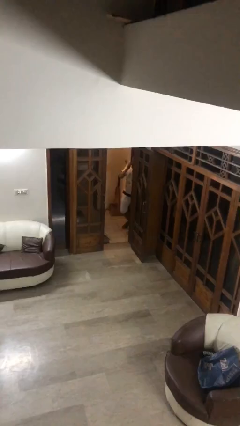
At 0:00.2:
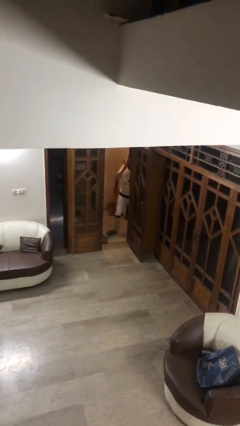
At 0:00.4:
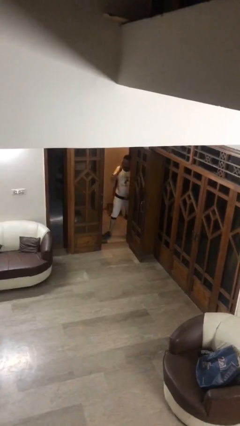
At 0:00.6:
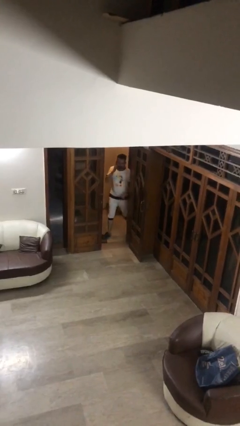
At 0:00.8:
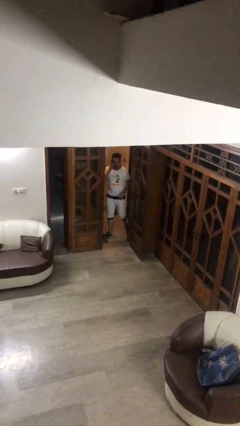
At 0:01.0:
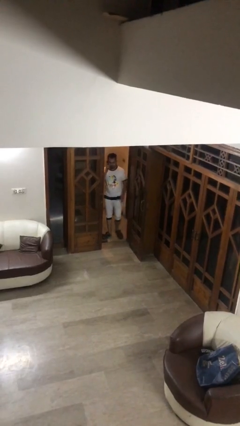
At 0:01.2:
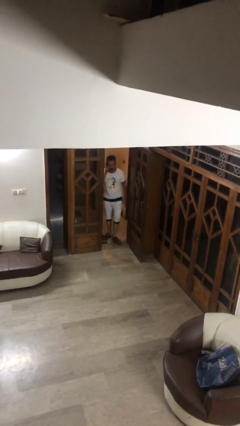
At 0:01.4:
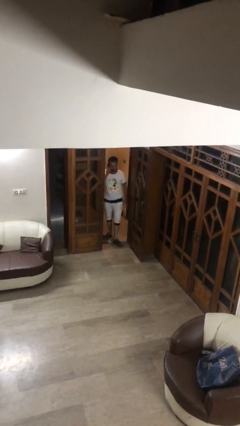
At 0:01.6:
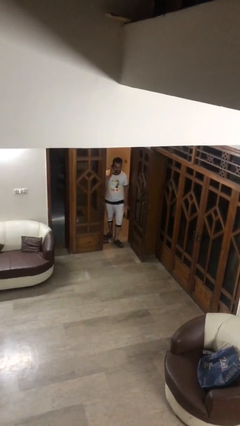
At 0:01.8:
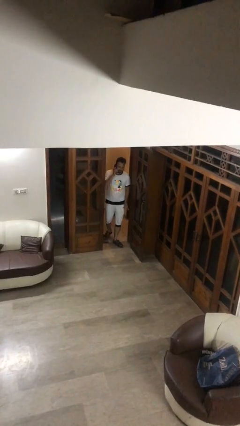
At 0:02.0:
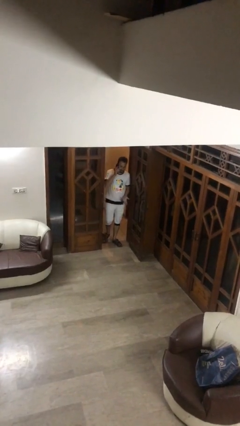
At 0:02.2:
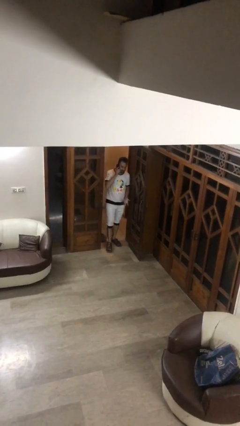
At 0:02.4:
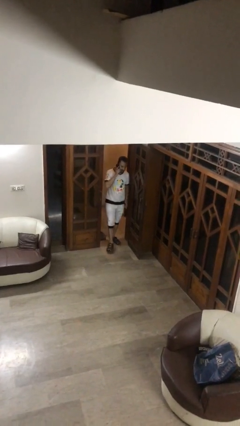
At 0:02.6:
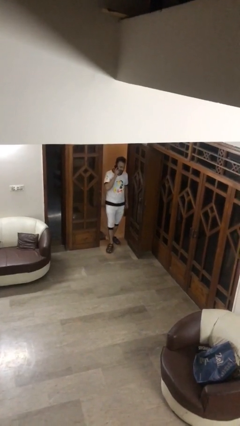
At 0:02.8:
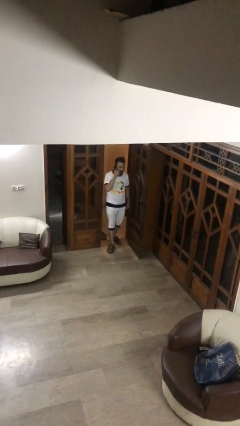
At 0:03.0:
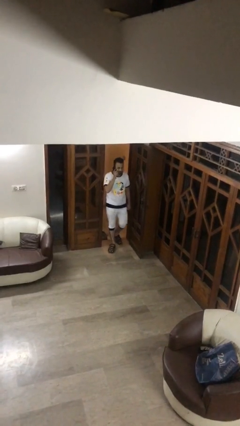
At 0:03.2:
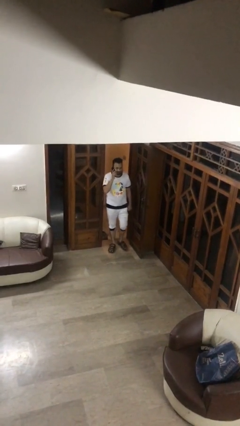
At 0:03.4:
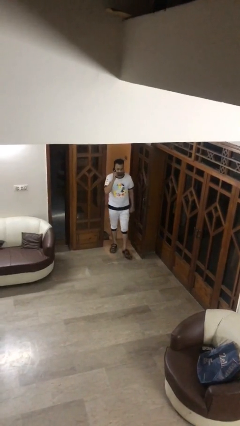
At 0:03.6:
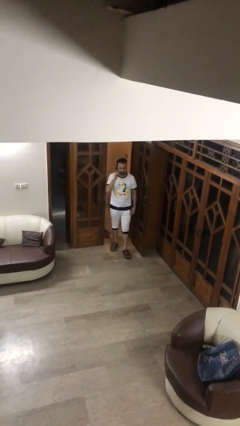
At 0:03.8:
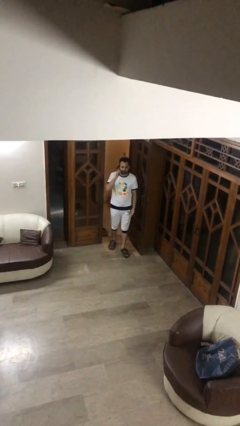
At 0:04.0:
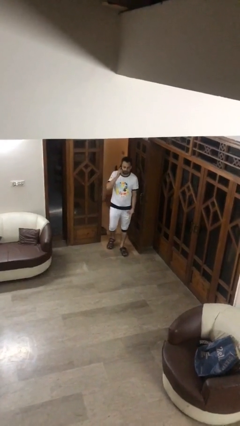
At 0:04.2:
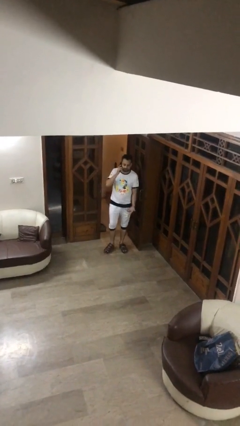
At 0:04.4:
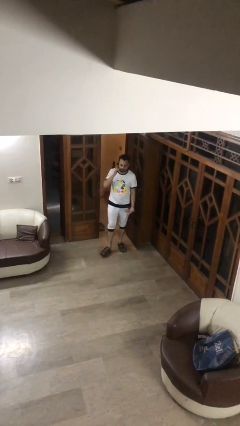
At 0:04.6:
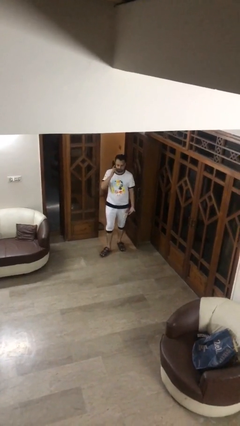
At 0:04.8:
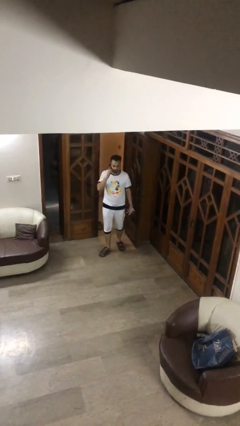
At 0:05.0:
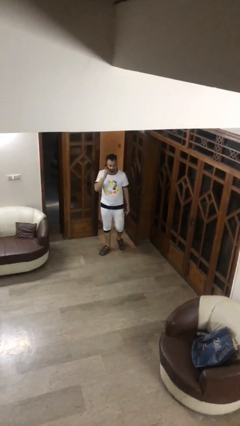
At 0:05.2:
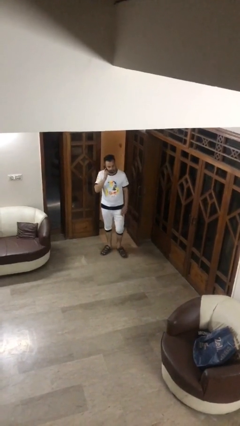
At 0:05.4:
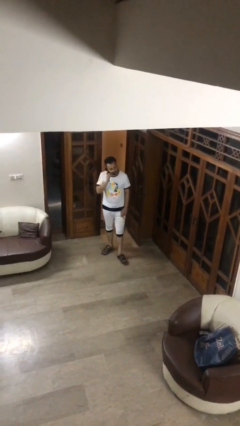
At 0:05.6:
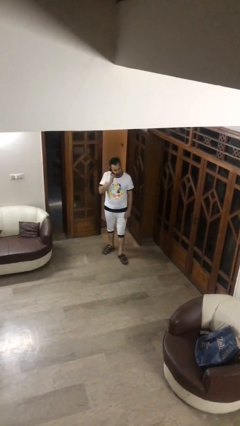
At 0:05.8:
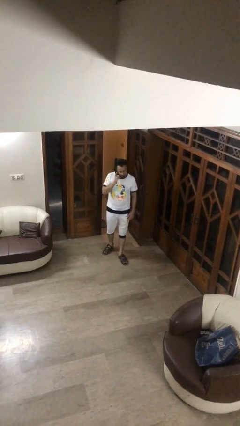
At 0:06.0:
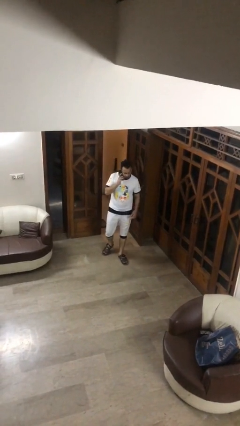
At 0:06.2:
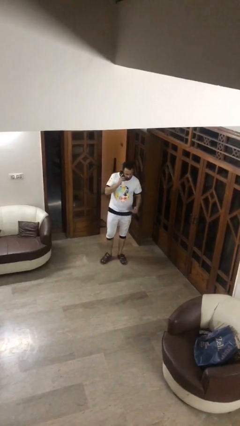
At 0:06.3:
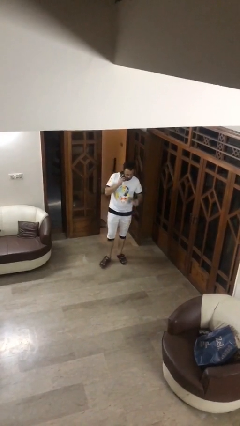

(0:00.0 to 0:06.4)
person enters scene through structure

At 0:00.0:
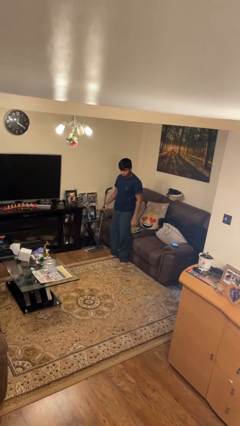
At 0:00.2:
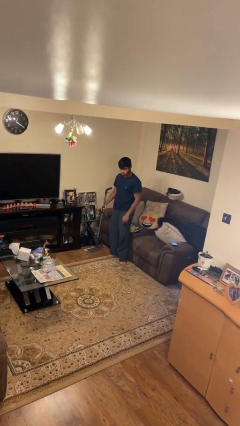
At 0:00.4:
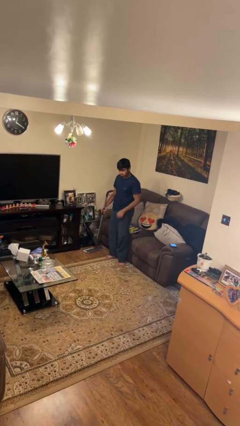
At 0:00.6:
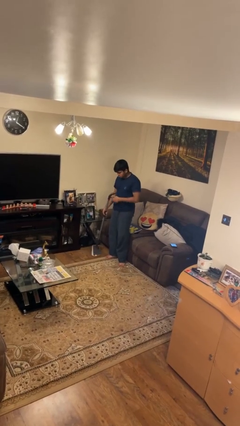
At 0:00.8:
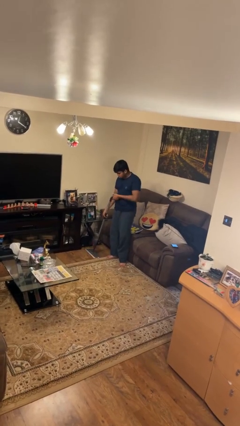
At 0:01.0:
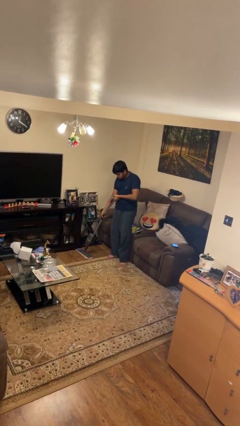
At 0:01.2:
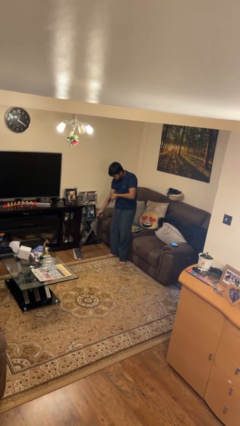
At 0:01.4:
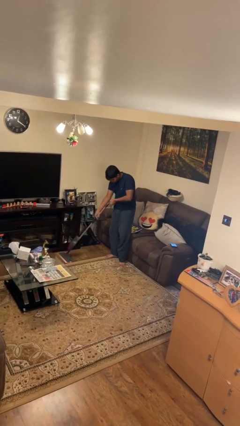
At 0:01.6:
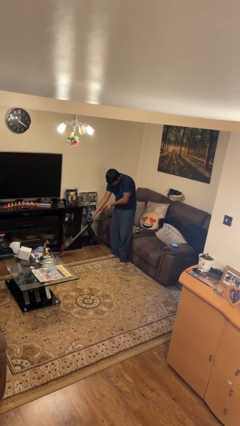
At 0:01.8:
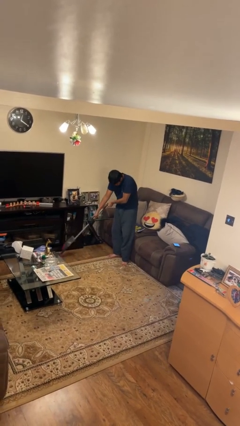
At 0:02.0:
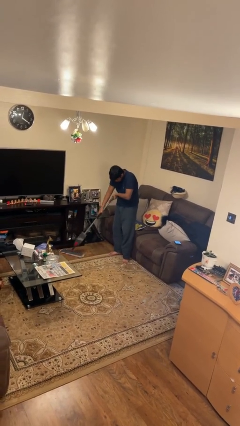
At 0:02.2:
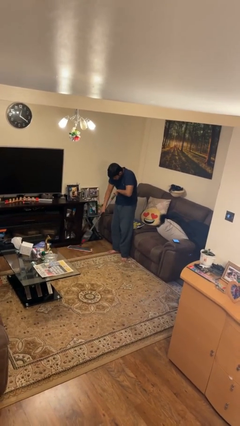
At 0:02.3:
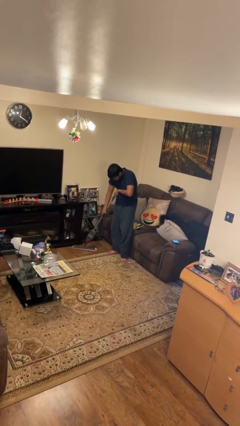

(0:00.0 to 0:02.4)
person mops

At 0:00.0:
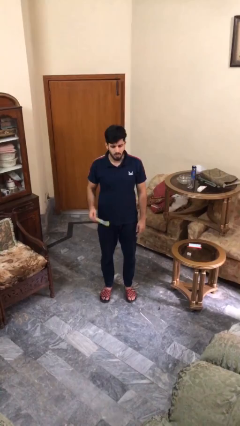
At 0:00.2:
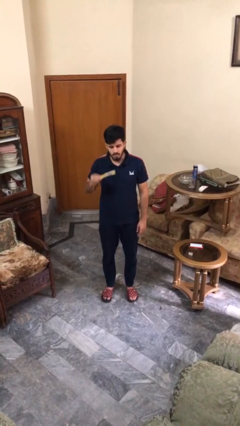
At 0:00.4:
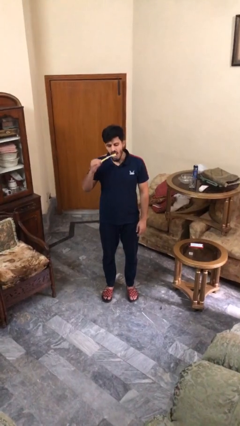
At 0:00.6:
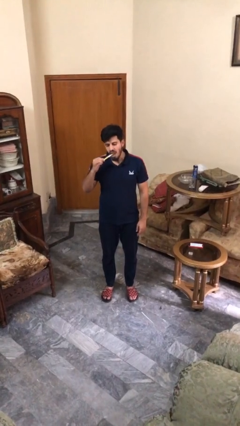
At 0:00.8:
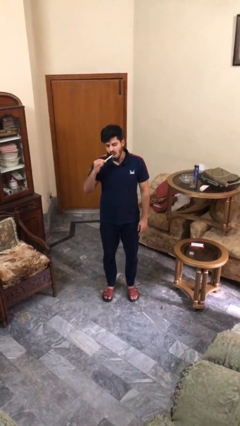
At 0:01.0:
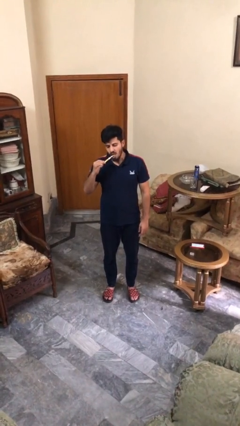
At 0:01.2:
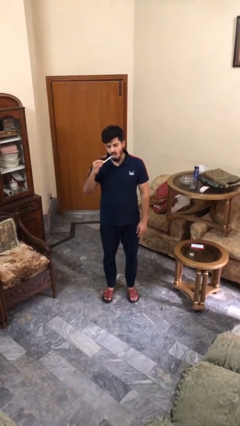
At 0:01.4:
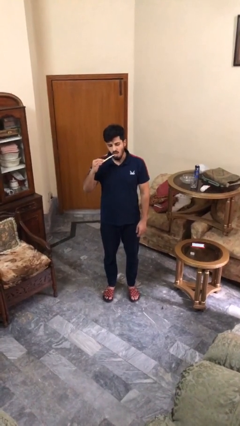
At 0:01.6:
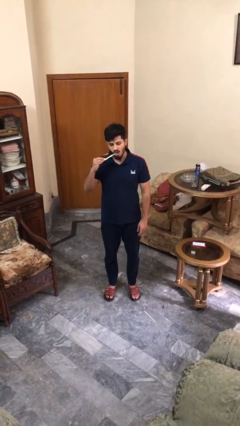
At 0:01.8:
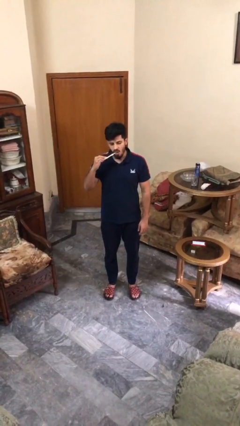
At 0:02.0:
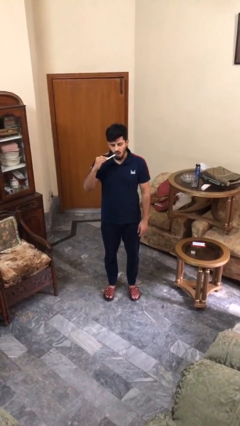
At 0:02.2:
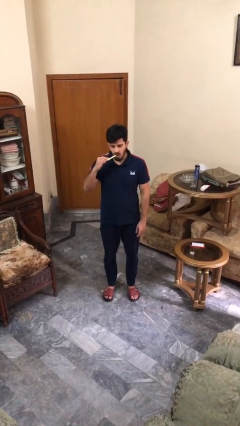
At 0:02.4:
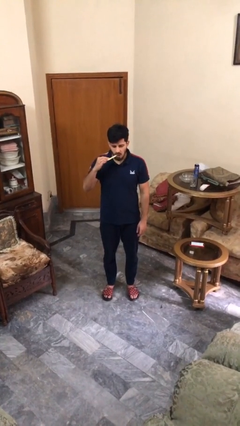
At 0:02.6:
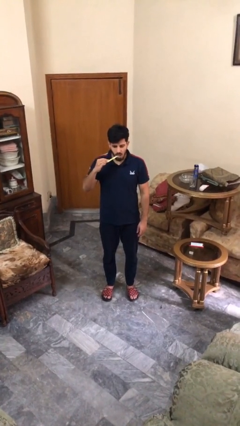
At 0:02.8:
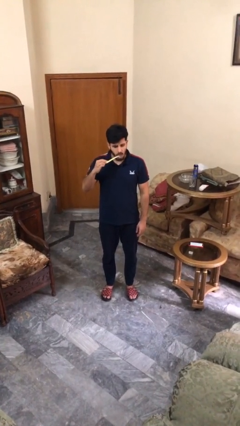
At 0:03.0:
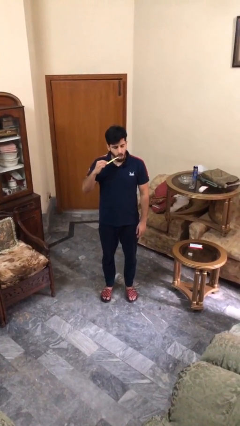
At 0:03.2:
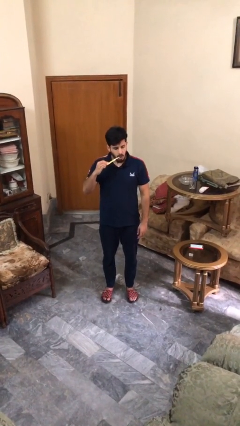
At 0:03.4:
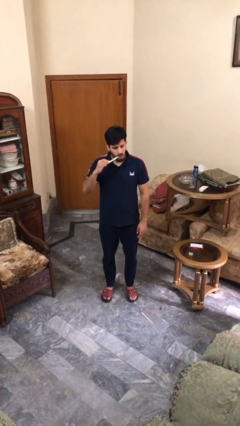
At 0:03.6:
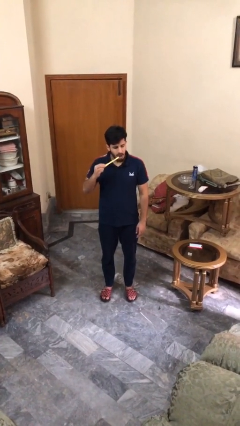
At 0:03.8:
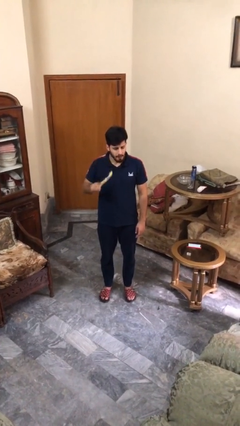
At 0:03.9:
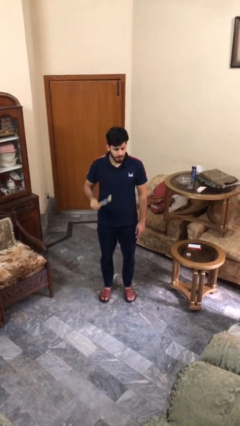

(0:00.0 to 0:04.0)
person brushes teeth

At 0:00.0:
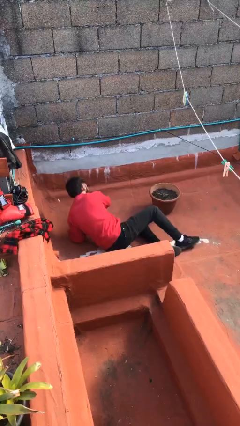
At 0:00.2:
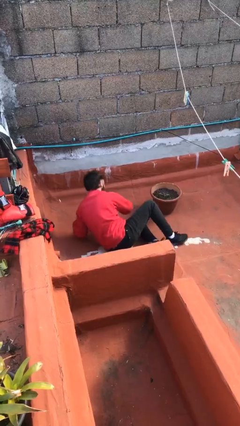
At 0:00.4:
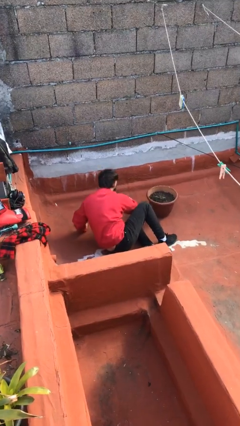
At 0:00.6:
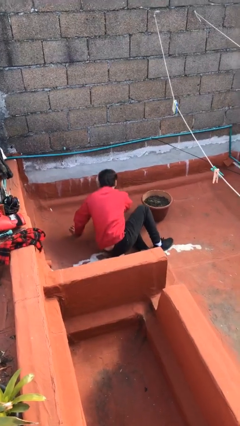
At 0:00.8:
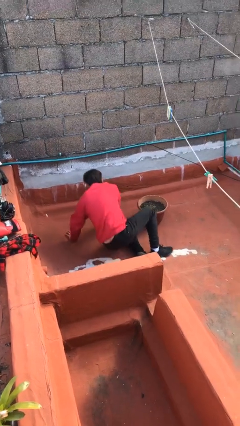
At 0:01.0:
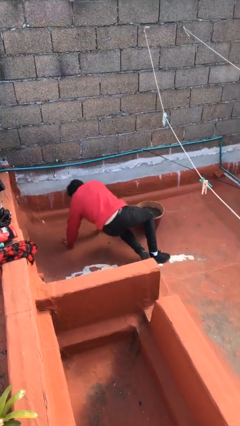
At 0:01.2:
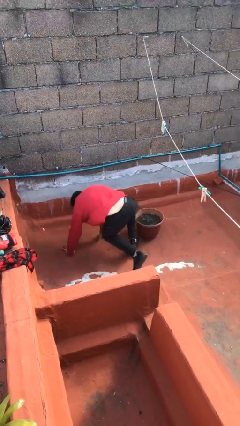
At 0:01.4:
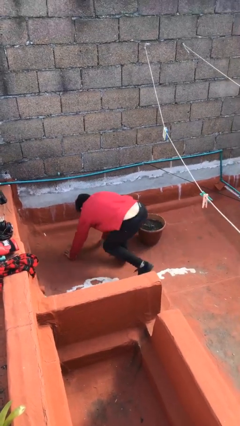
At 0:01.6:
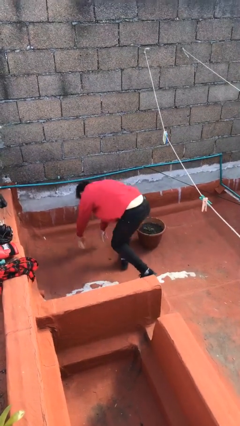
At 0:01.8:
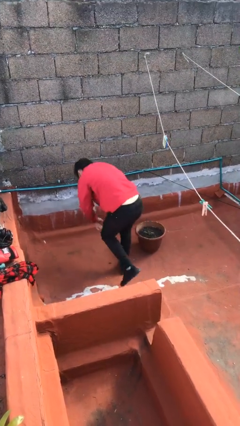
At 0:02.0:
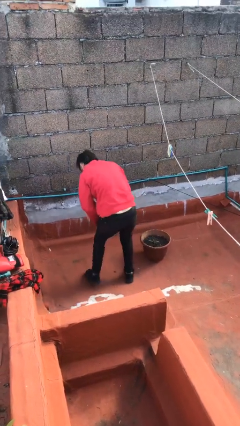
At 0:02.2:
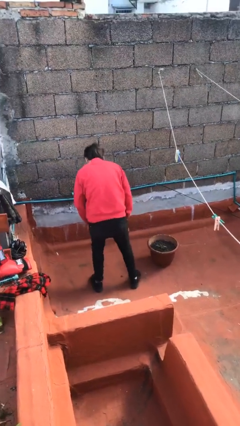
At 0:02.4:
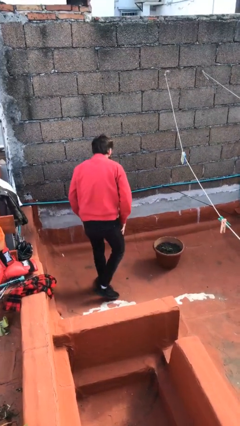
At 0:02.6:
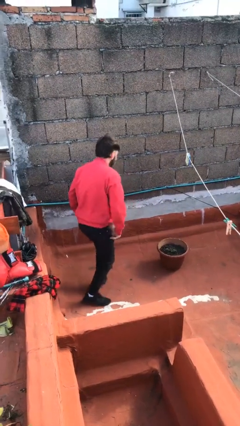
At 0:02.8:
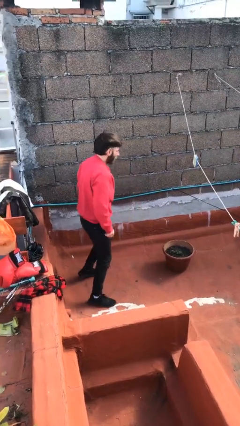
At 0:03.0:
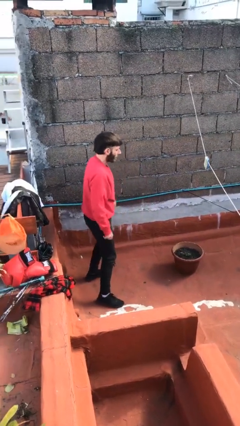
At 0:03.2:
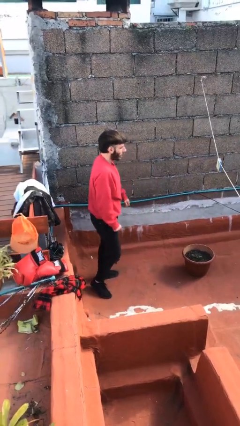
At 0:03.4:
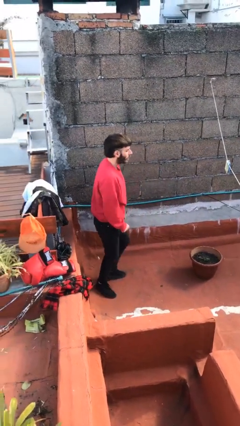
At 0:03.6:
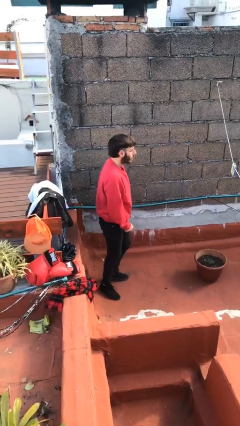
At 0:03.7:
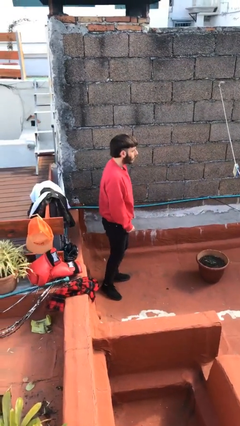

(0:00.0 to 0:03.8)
person stands up from floor

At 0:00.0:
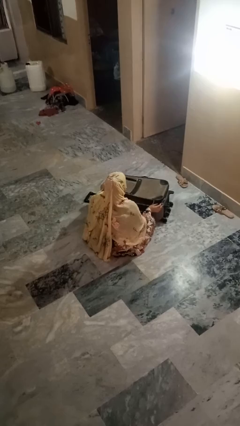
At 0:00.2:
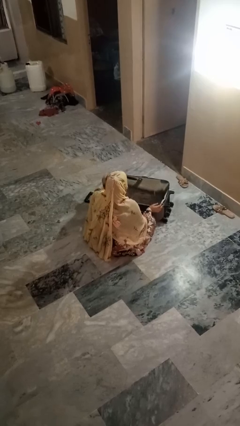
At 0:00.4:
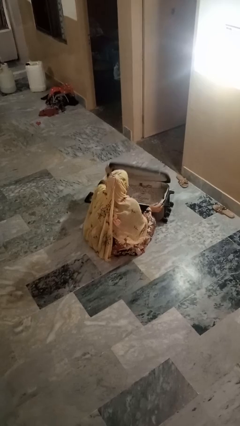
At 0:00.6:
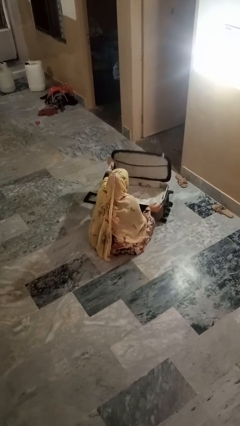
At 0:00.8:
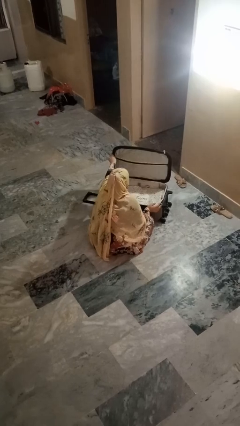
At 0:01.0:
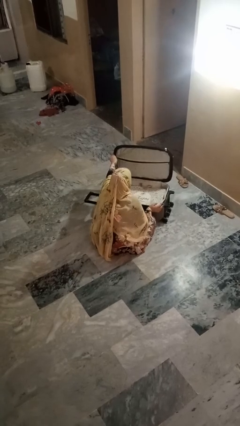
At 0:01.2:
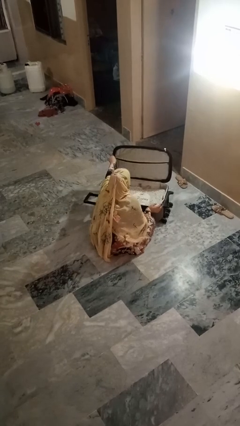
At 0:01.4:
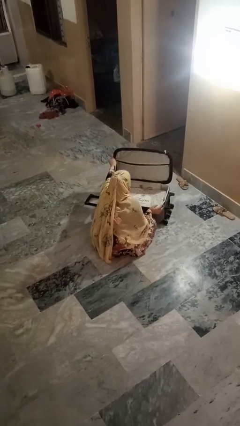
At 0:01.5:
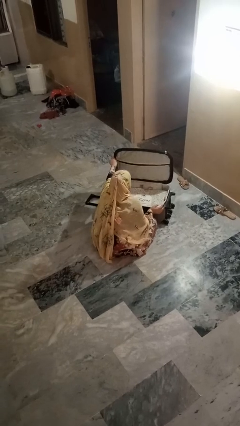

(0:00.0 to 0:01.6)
person opens suitcase
